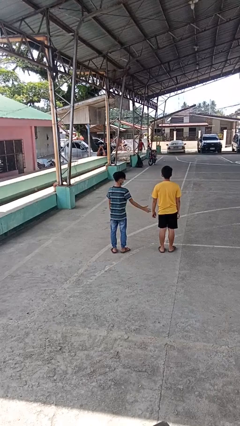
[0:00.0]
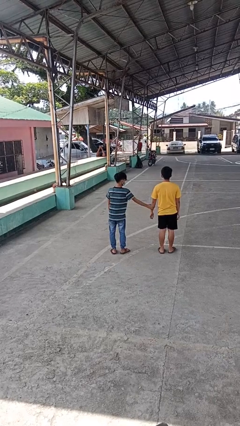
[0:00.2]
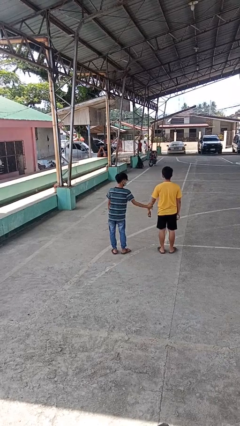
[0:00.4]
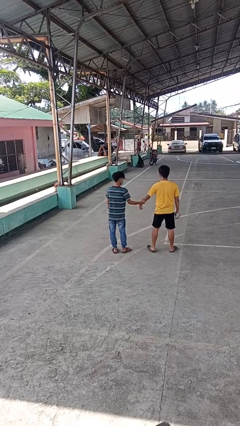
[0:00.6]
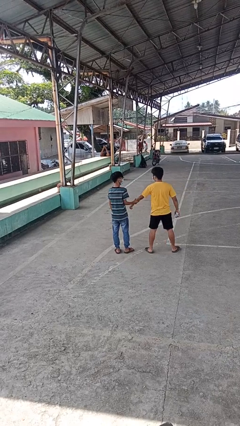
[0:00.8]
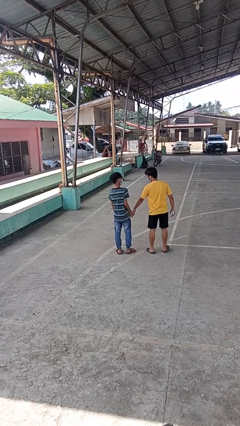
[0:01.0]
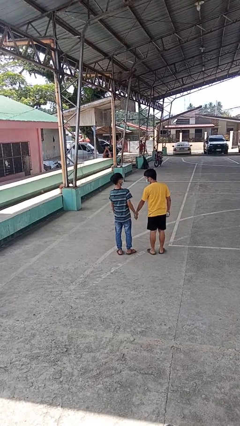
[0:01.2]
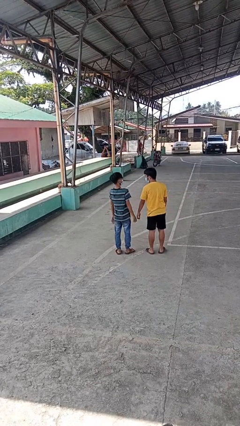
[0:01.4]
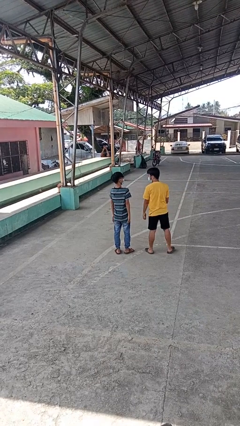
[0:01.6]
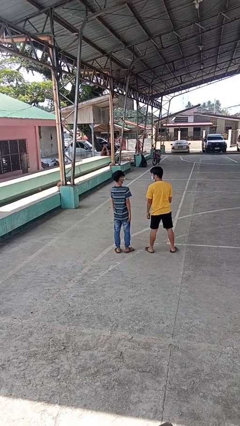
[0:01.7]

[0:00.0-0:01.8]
person grabs person by forearm

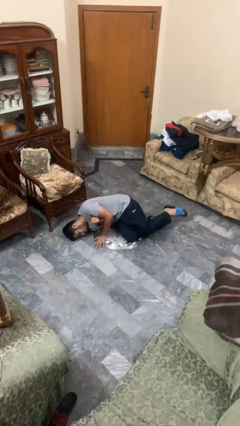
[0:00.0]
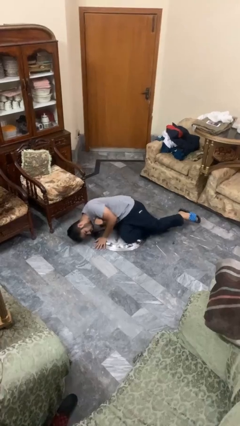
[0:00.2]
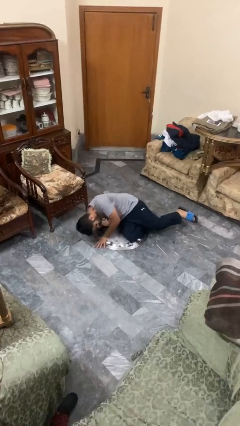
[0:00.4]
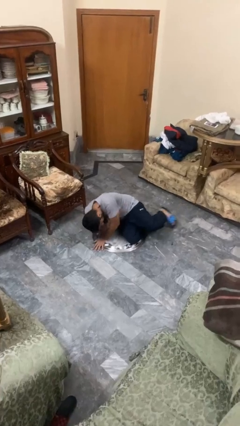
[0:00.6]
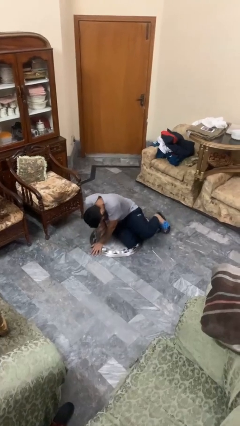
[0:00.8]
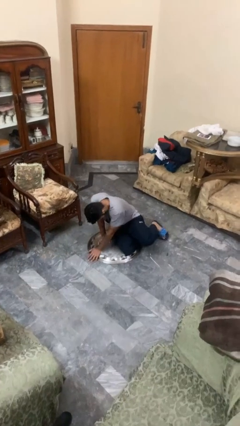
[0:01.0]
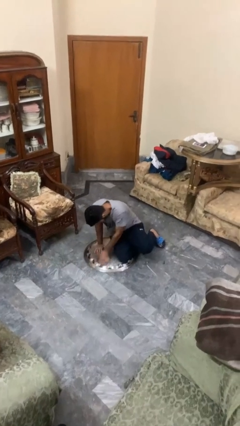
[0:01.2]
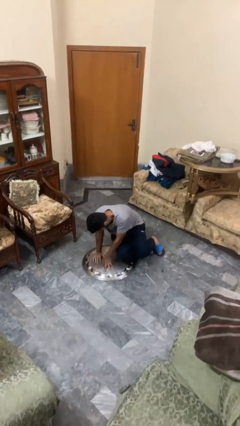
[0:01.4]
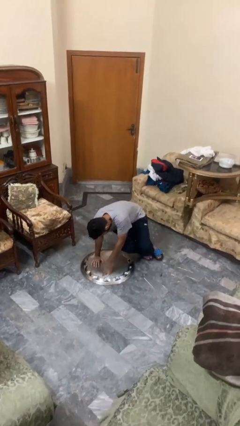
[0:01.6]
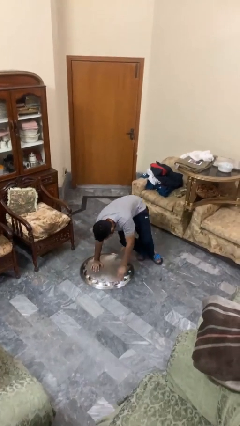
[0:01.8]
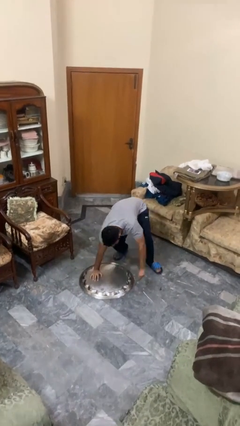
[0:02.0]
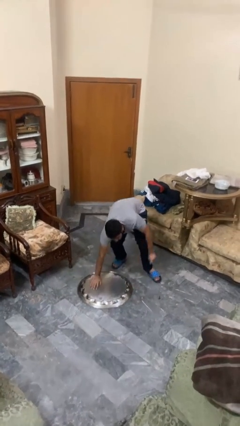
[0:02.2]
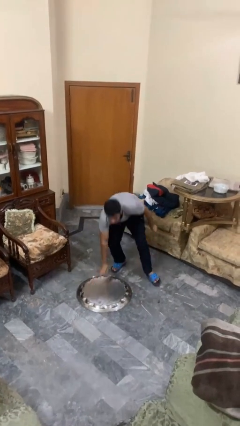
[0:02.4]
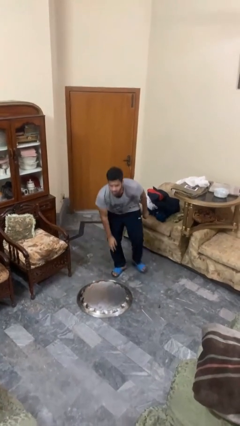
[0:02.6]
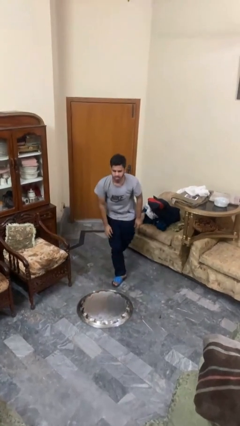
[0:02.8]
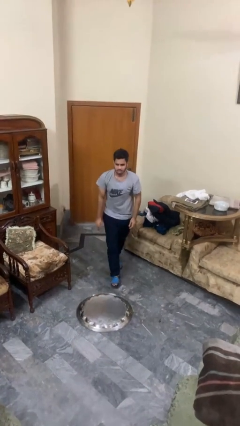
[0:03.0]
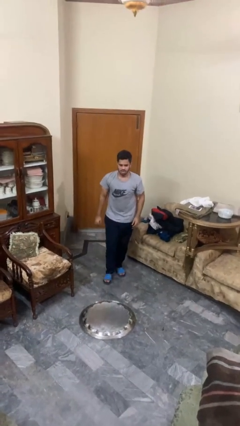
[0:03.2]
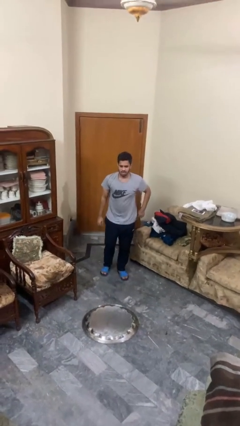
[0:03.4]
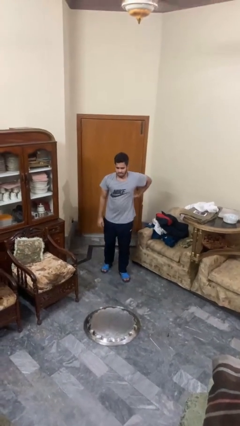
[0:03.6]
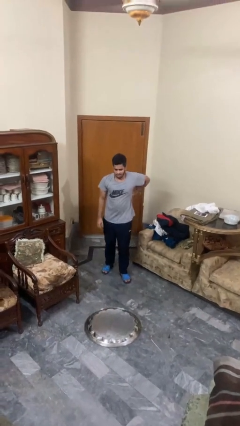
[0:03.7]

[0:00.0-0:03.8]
person stands up from floor

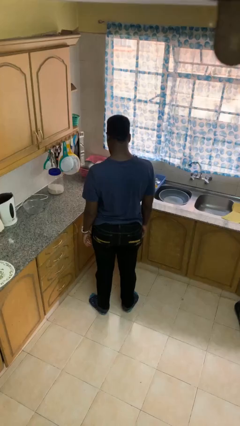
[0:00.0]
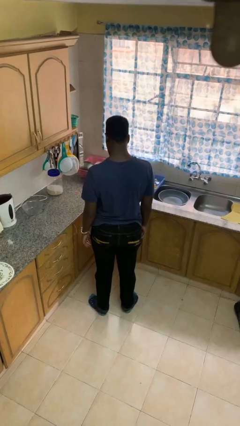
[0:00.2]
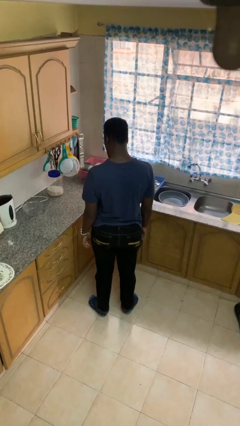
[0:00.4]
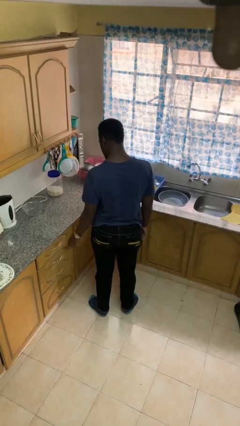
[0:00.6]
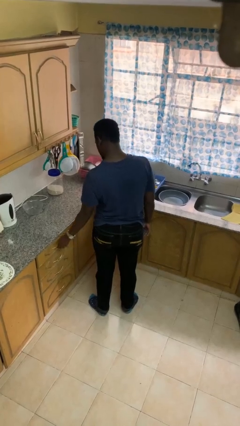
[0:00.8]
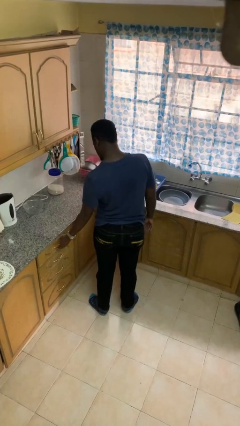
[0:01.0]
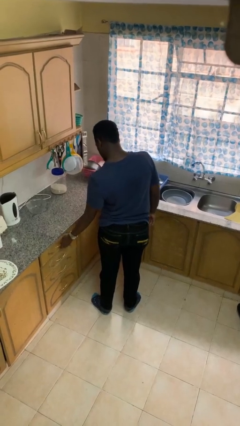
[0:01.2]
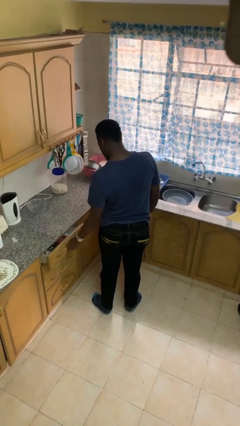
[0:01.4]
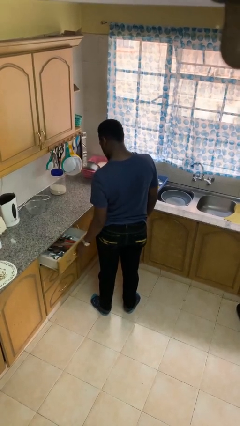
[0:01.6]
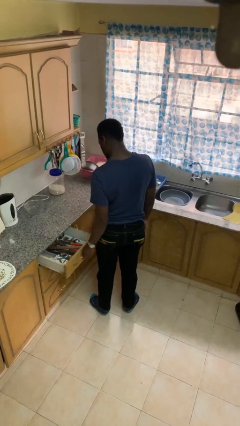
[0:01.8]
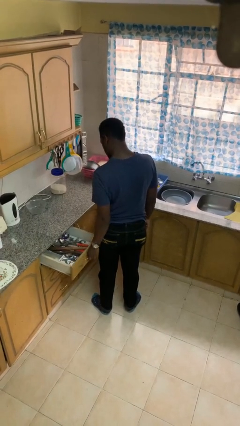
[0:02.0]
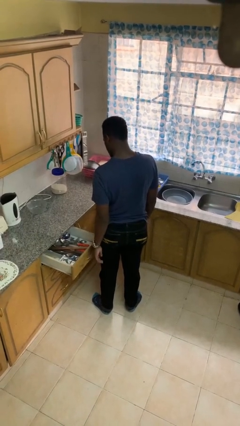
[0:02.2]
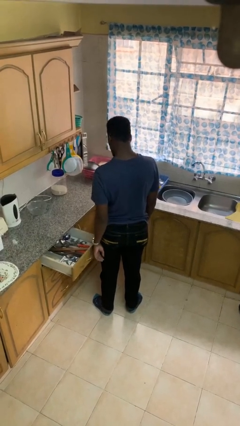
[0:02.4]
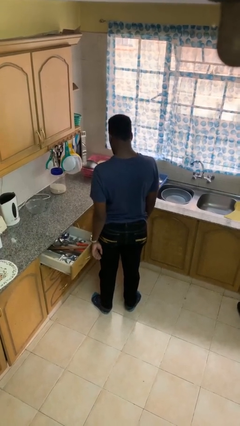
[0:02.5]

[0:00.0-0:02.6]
person opens kitchen drawer

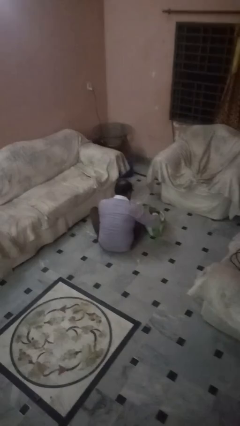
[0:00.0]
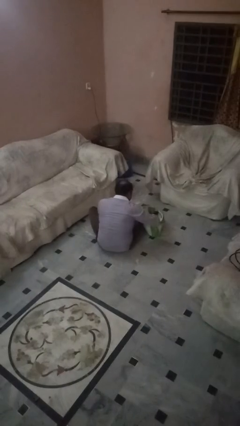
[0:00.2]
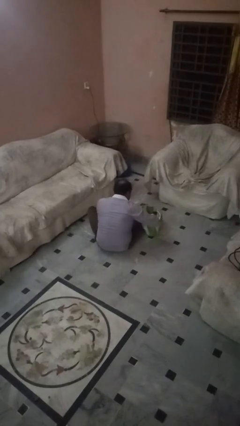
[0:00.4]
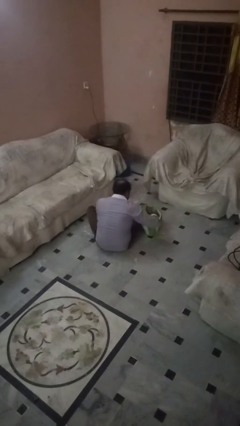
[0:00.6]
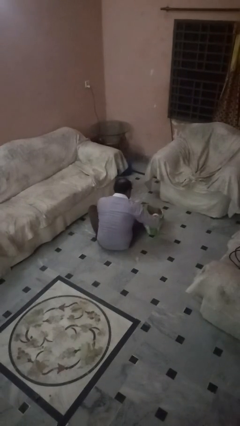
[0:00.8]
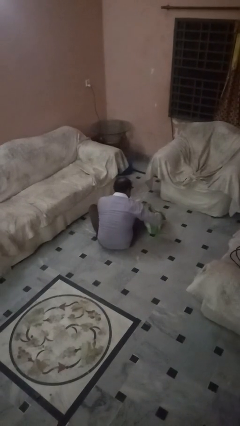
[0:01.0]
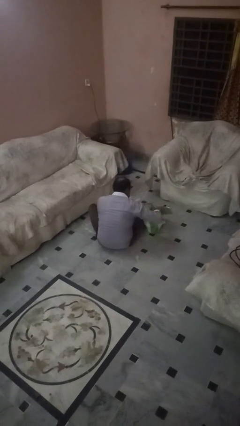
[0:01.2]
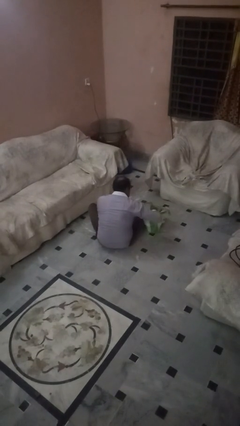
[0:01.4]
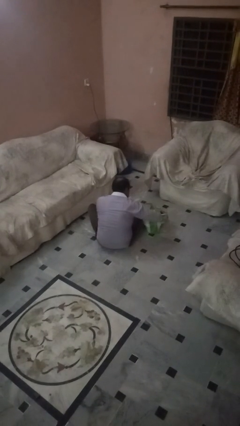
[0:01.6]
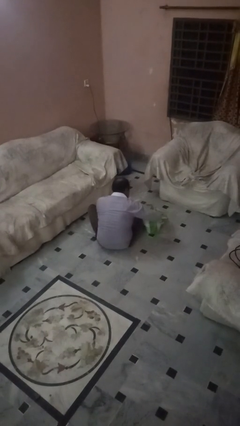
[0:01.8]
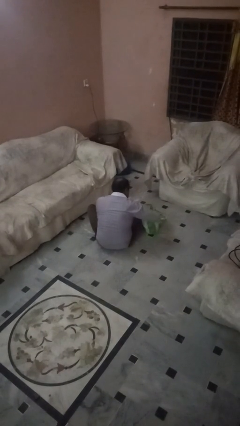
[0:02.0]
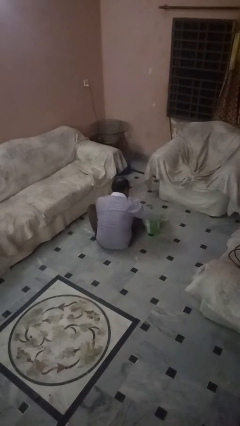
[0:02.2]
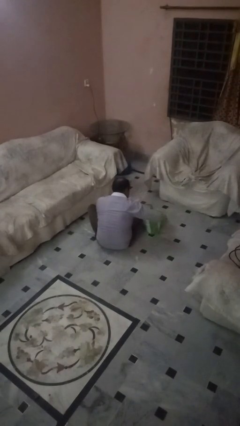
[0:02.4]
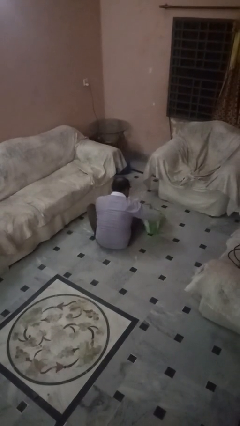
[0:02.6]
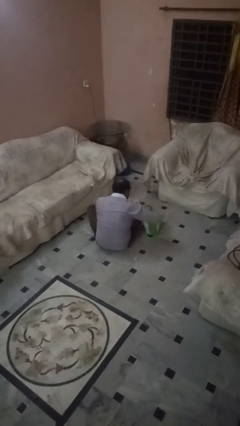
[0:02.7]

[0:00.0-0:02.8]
person searches in bag

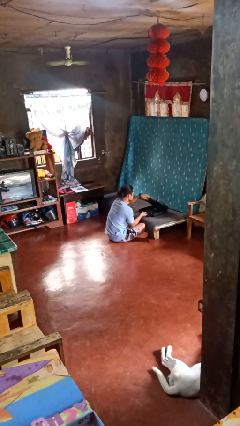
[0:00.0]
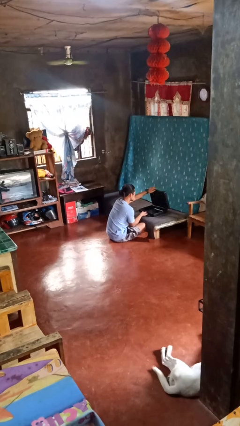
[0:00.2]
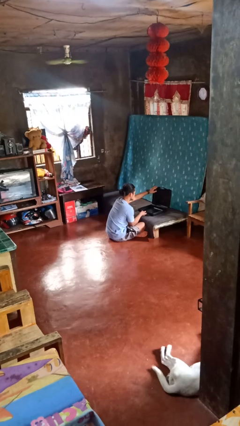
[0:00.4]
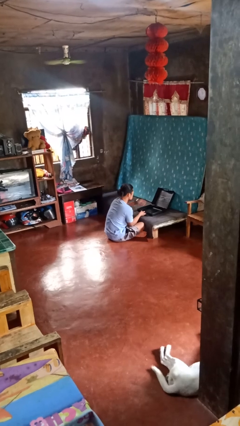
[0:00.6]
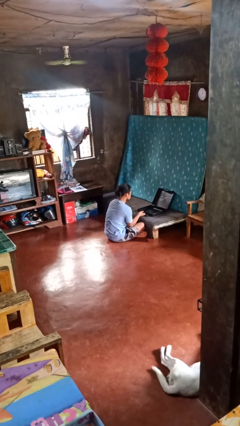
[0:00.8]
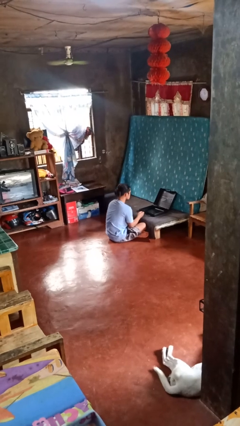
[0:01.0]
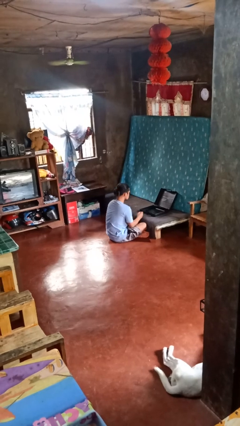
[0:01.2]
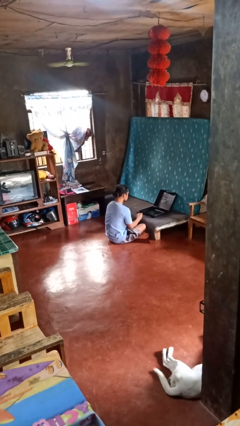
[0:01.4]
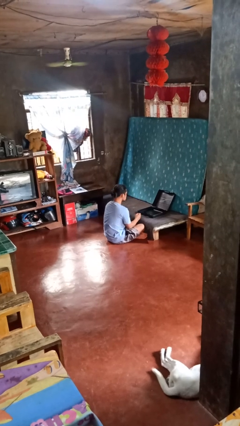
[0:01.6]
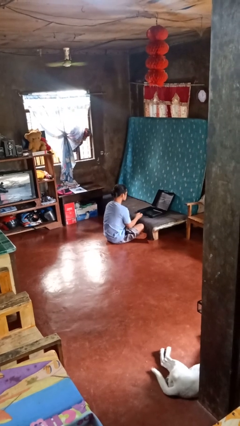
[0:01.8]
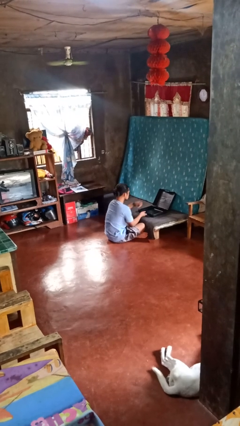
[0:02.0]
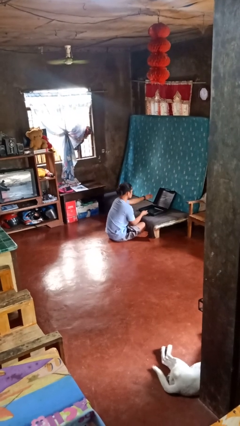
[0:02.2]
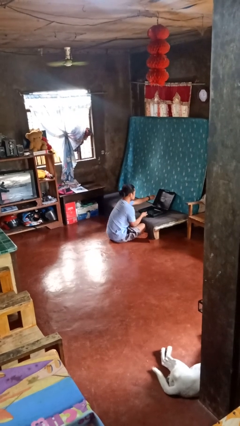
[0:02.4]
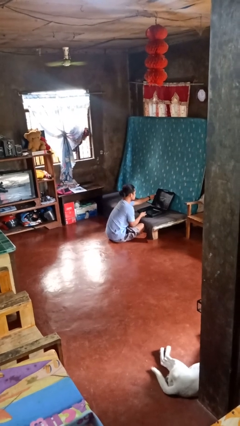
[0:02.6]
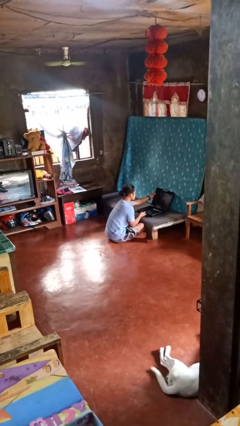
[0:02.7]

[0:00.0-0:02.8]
person opens suitcase

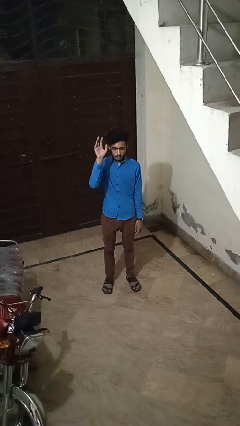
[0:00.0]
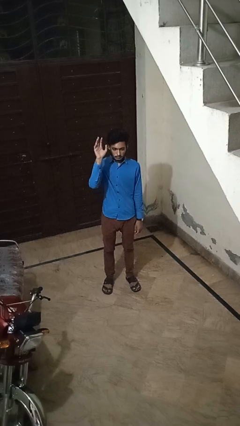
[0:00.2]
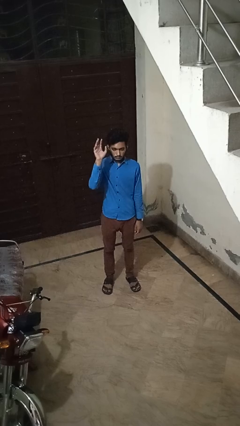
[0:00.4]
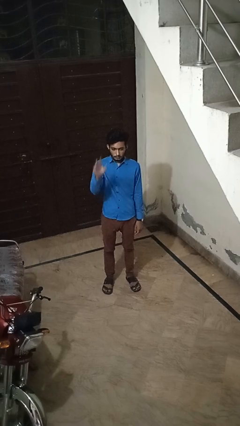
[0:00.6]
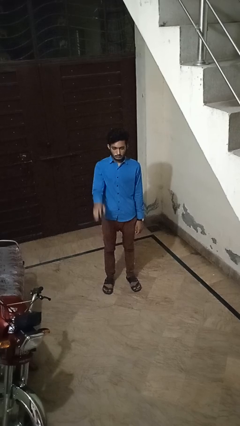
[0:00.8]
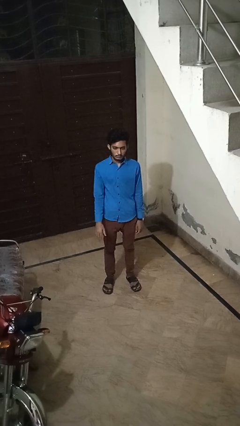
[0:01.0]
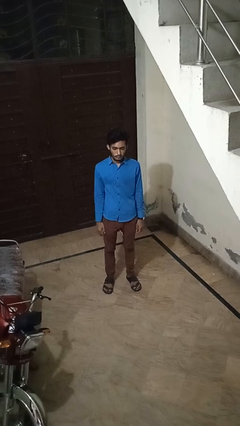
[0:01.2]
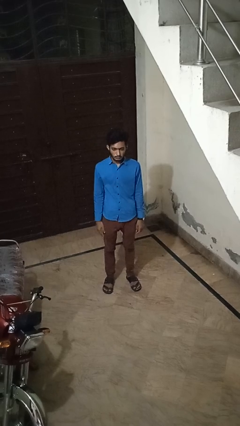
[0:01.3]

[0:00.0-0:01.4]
person gestures lower hand

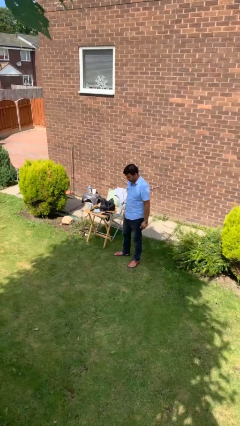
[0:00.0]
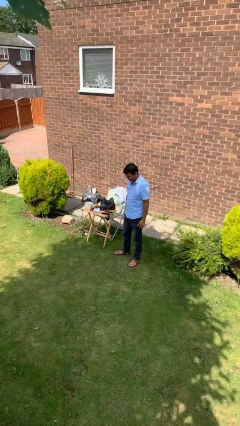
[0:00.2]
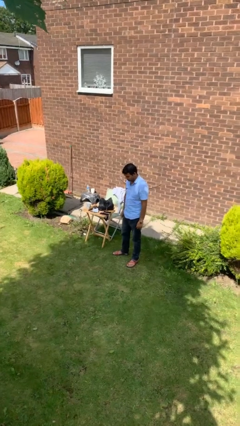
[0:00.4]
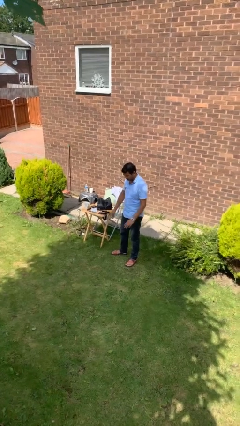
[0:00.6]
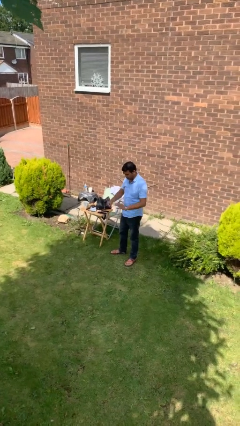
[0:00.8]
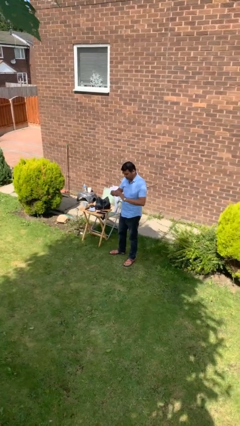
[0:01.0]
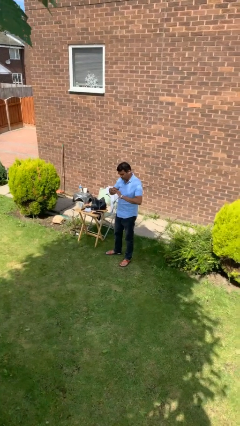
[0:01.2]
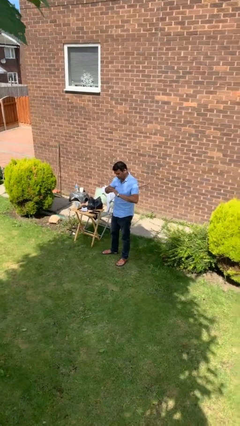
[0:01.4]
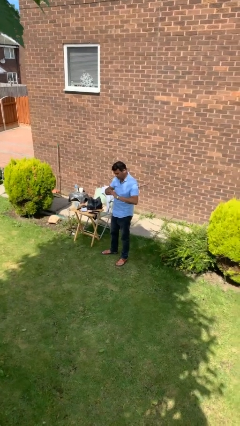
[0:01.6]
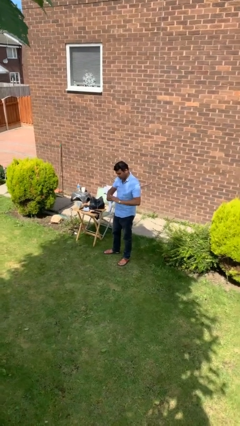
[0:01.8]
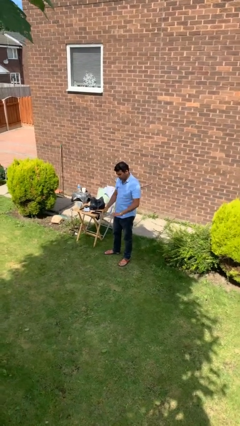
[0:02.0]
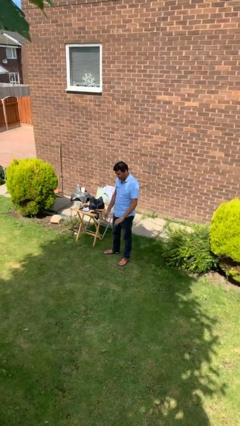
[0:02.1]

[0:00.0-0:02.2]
person puts on ring
